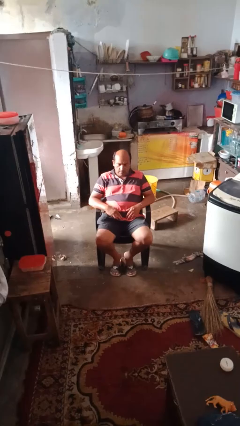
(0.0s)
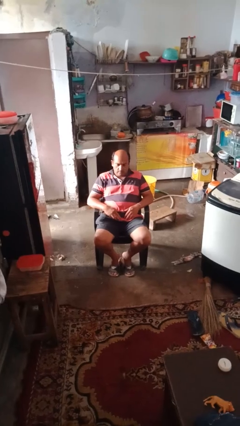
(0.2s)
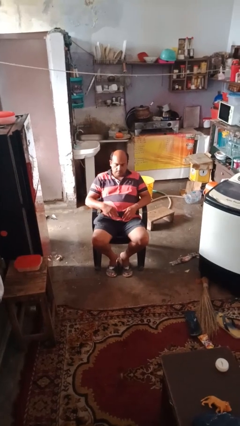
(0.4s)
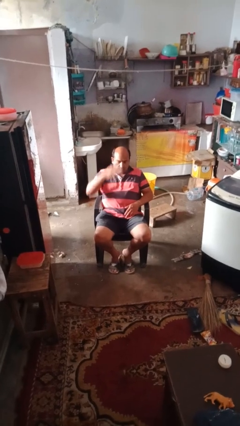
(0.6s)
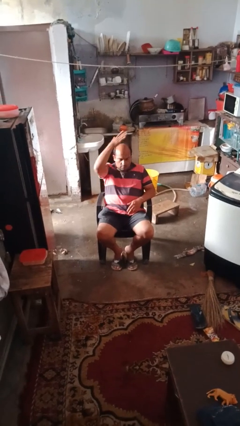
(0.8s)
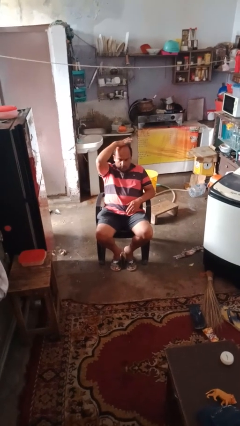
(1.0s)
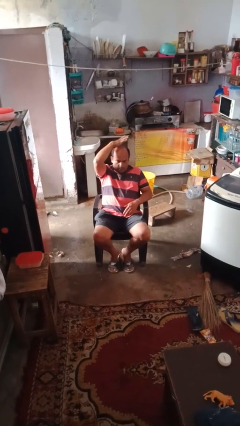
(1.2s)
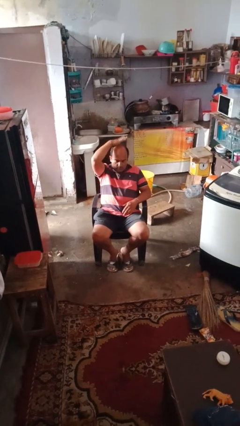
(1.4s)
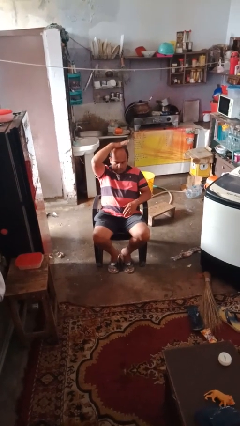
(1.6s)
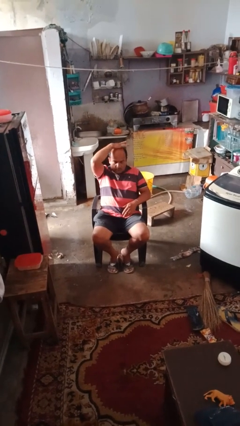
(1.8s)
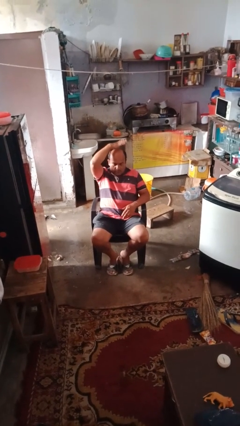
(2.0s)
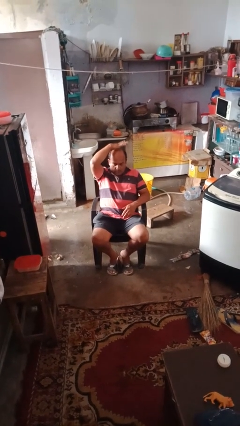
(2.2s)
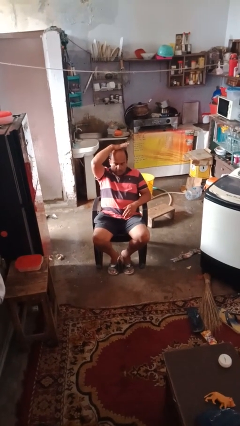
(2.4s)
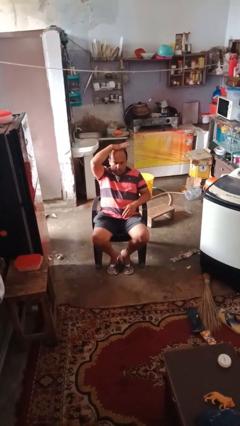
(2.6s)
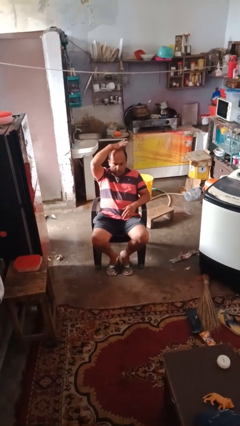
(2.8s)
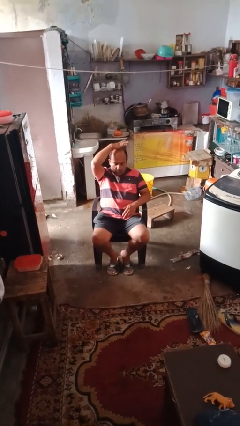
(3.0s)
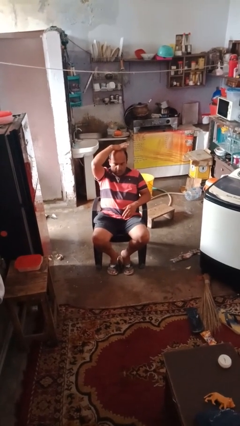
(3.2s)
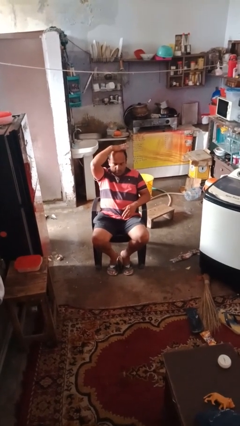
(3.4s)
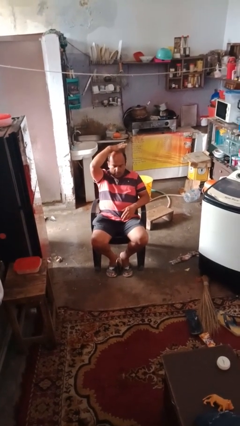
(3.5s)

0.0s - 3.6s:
person holds object above head

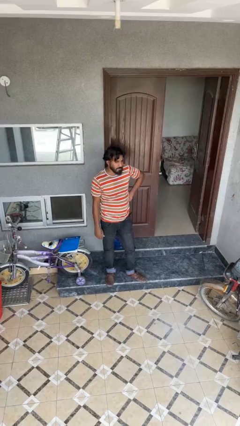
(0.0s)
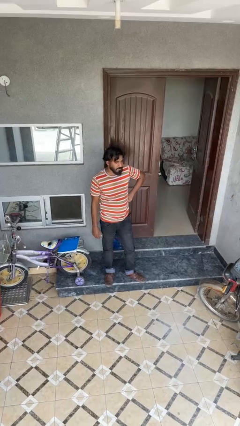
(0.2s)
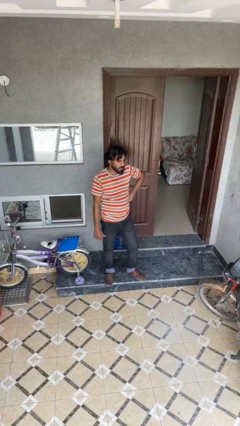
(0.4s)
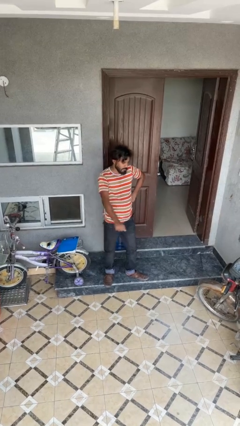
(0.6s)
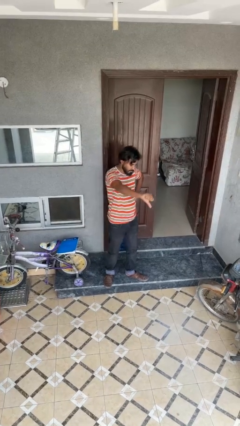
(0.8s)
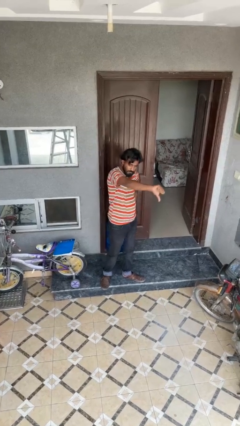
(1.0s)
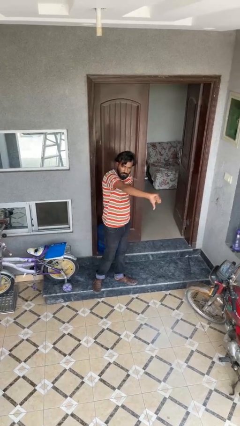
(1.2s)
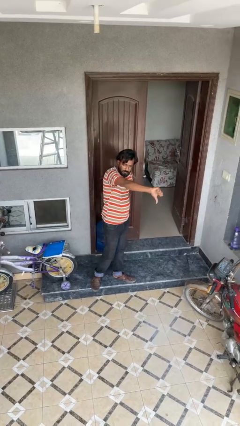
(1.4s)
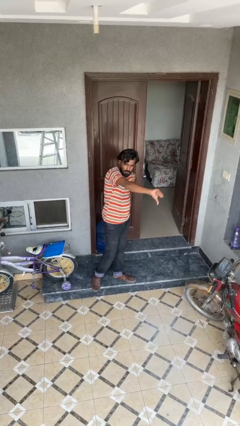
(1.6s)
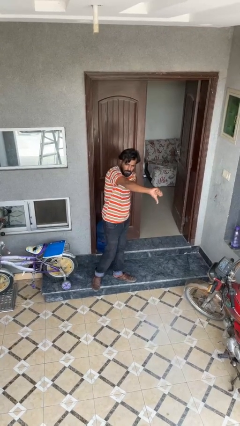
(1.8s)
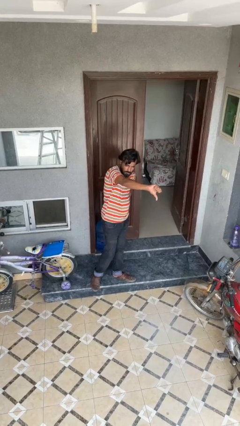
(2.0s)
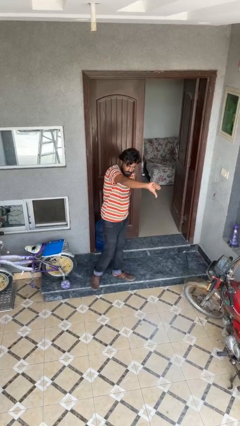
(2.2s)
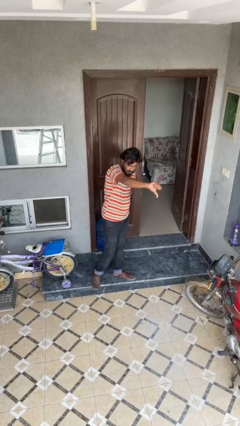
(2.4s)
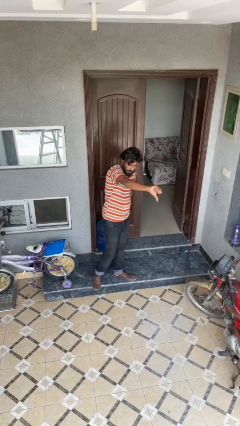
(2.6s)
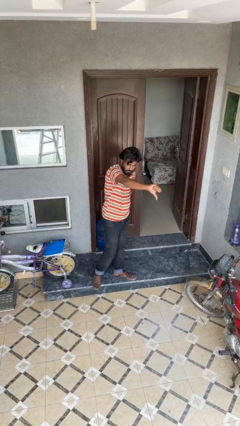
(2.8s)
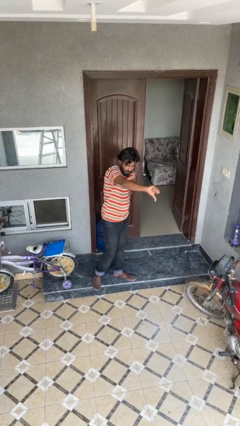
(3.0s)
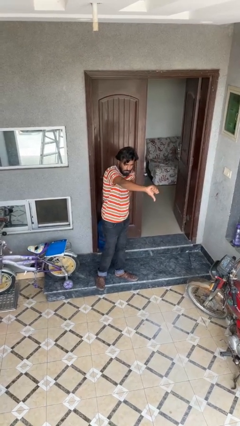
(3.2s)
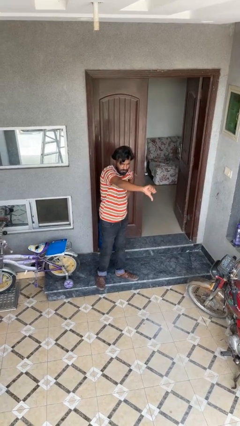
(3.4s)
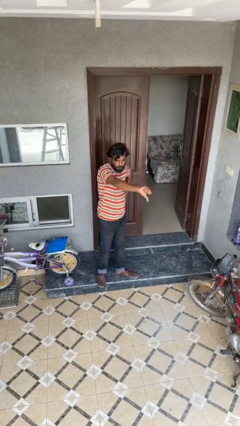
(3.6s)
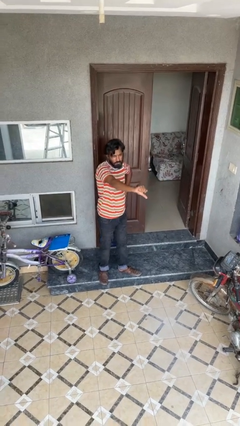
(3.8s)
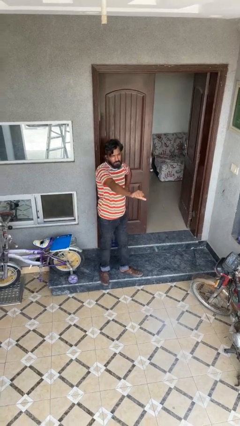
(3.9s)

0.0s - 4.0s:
person gestures thumbs down

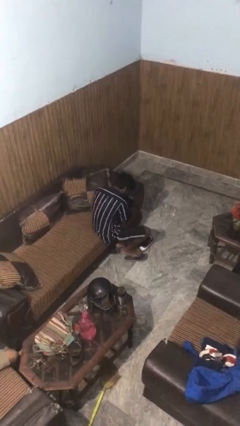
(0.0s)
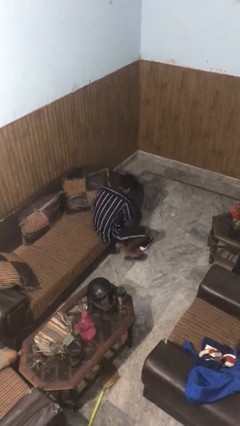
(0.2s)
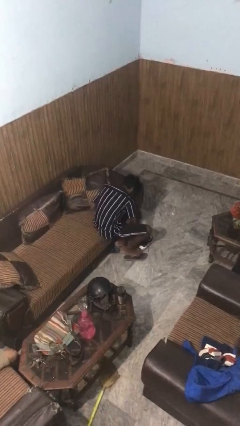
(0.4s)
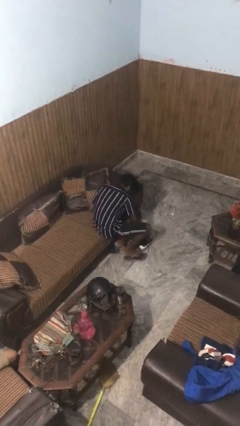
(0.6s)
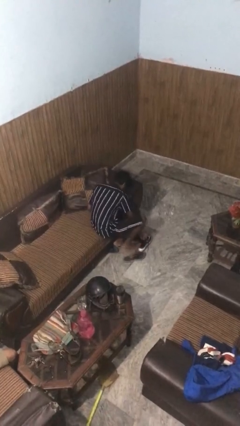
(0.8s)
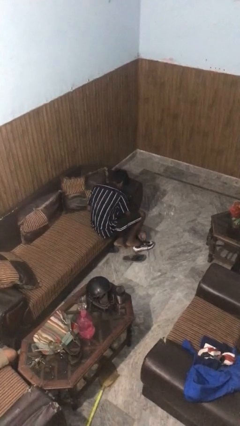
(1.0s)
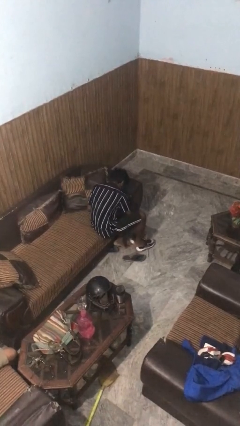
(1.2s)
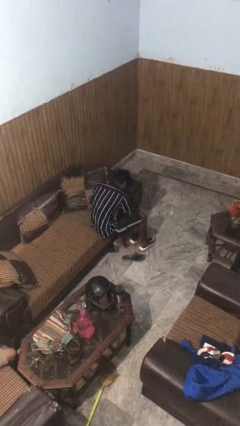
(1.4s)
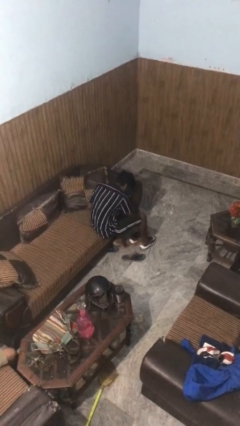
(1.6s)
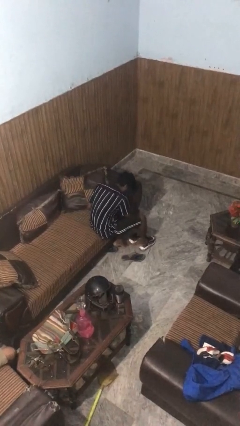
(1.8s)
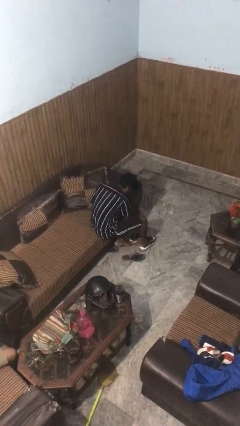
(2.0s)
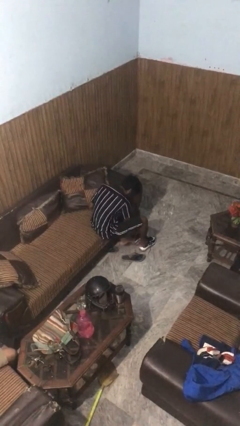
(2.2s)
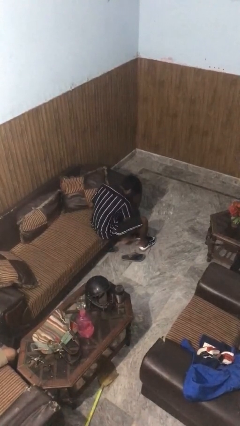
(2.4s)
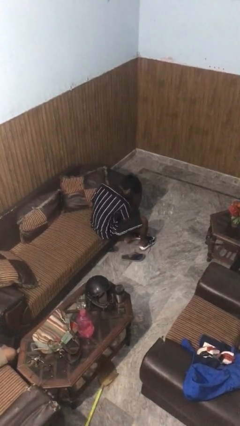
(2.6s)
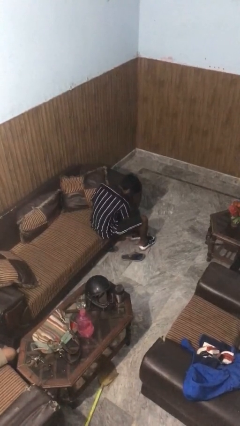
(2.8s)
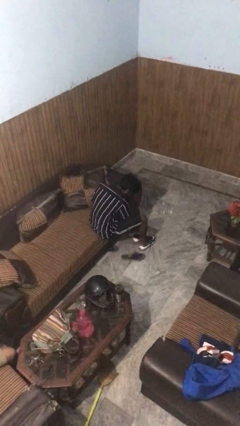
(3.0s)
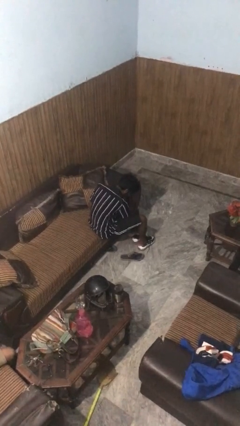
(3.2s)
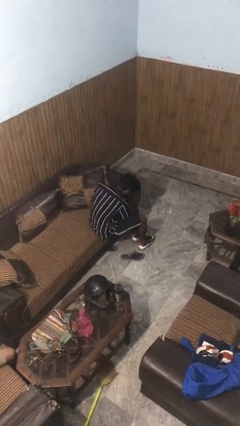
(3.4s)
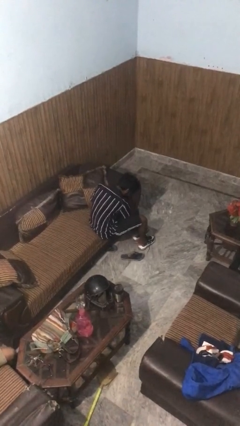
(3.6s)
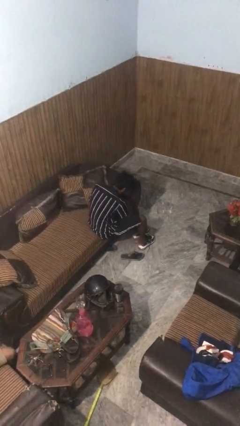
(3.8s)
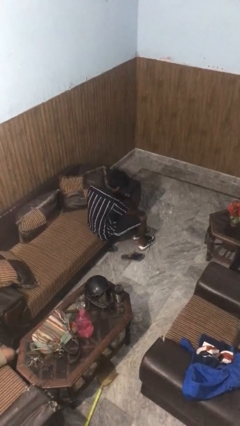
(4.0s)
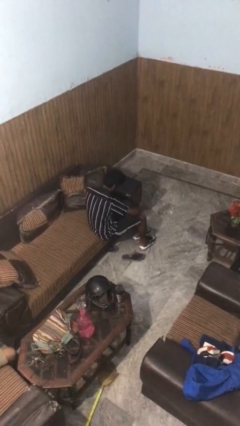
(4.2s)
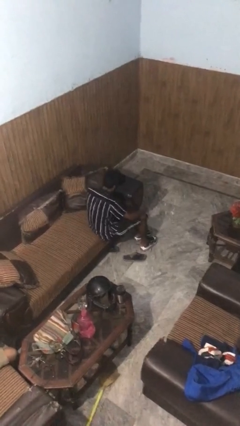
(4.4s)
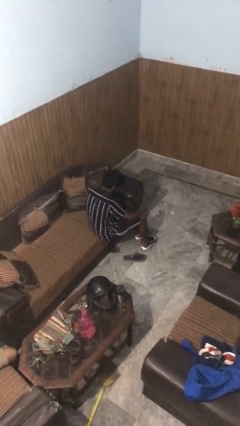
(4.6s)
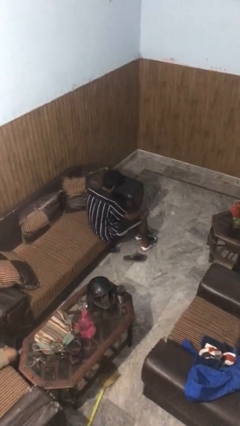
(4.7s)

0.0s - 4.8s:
person puts on shoes

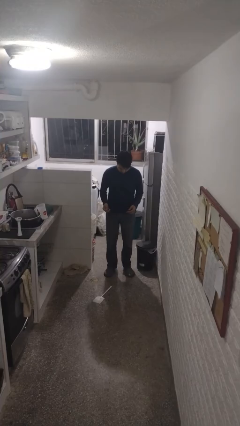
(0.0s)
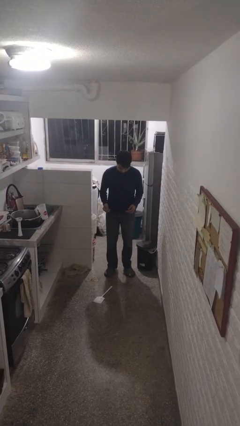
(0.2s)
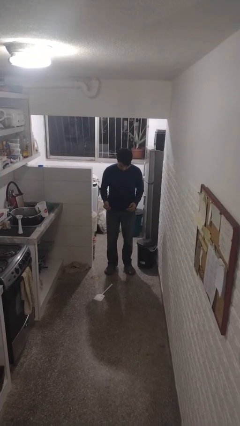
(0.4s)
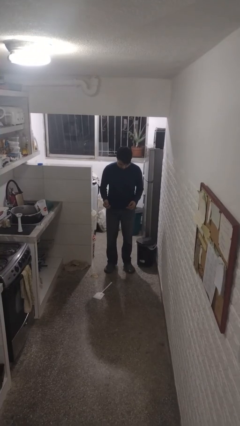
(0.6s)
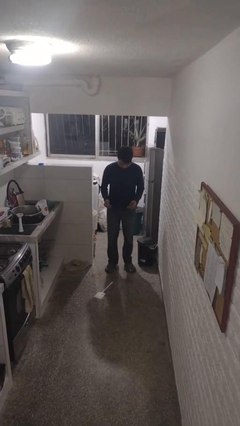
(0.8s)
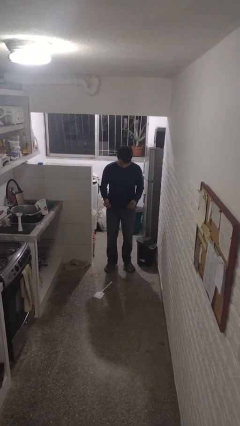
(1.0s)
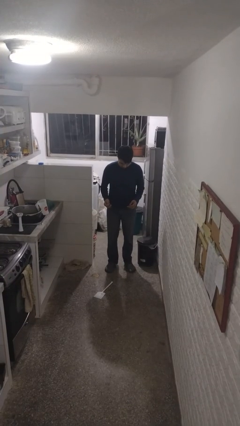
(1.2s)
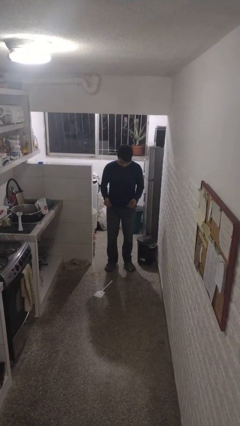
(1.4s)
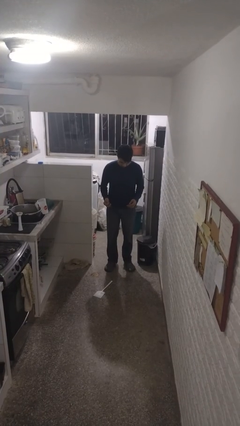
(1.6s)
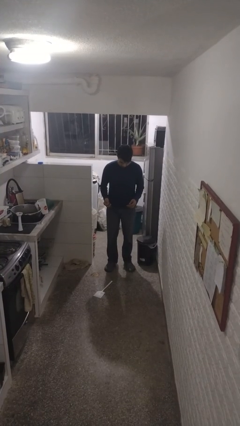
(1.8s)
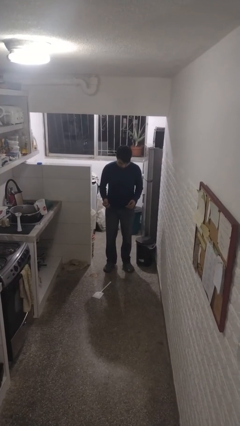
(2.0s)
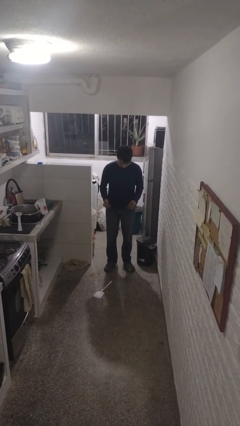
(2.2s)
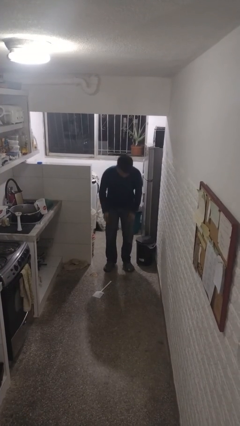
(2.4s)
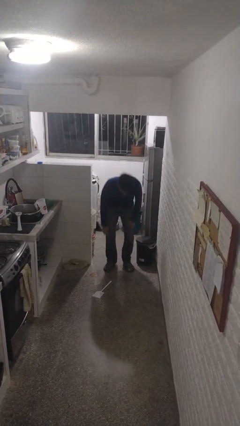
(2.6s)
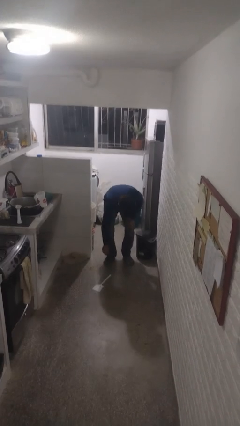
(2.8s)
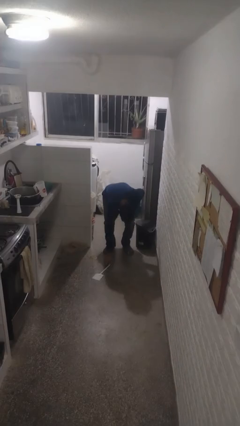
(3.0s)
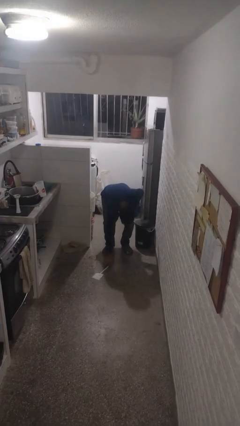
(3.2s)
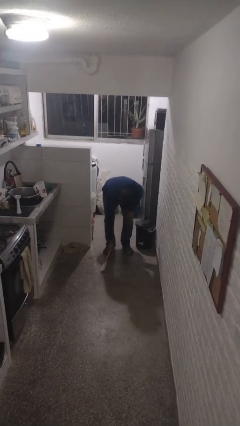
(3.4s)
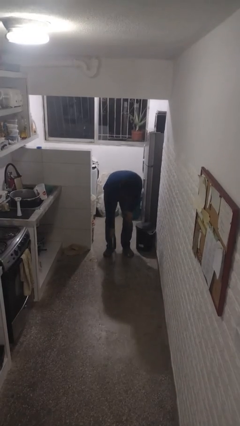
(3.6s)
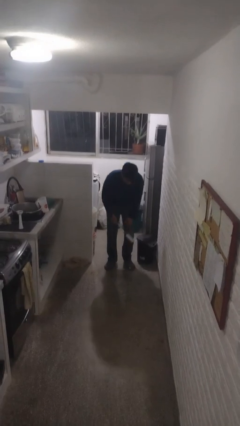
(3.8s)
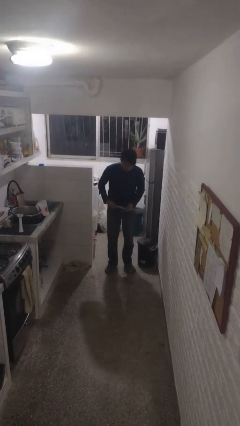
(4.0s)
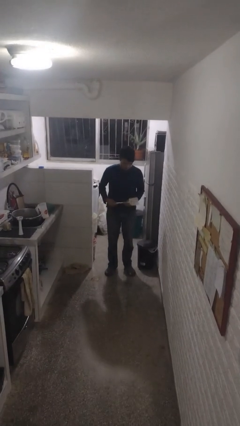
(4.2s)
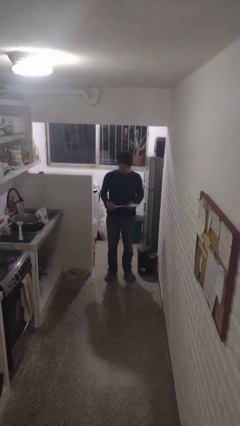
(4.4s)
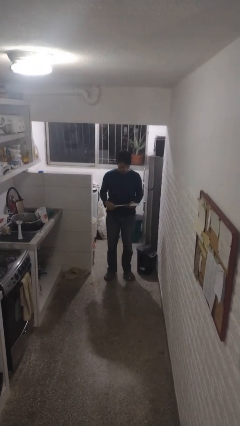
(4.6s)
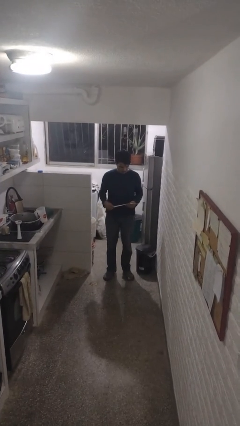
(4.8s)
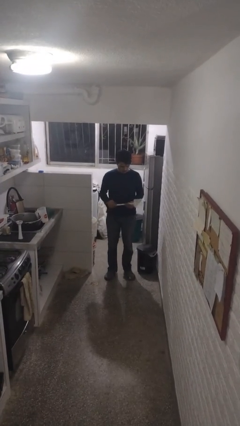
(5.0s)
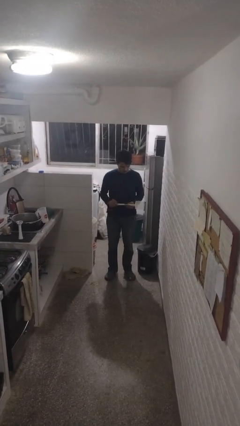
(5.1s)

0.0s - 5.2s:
person picks up object from floor

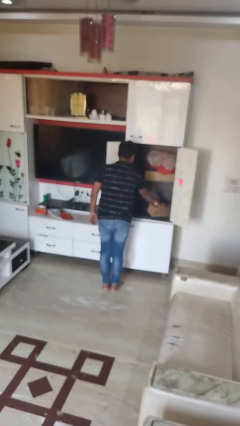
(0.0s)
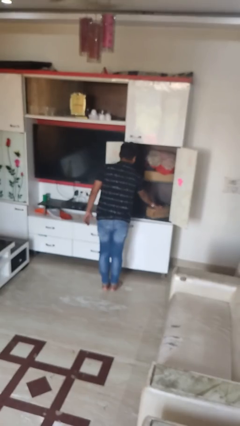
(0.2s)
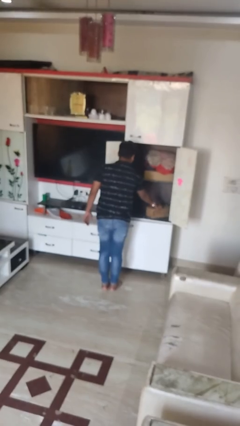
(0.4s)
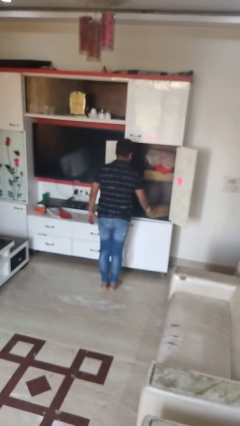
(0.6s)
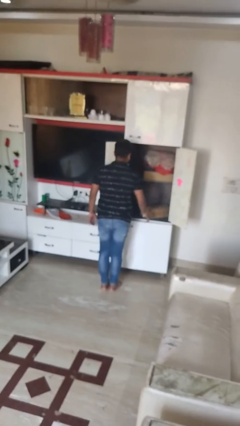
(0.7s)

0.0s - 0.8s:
person puts down object into cabinet
